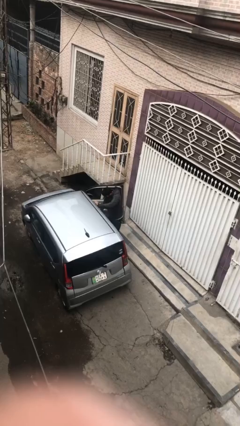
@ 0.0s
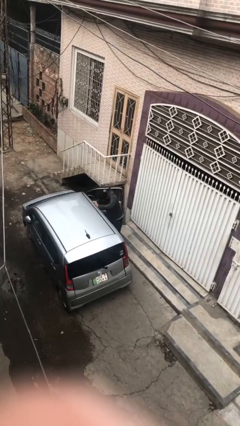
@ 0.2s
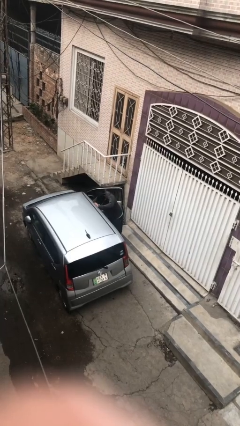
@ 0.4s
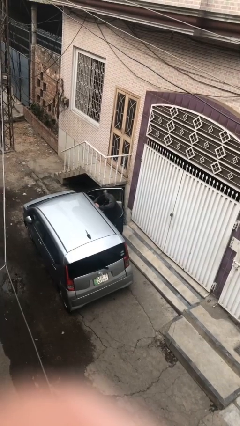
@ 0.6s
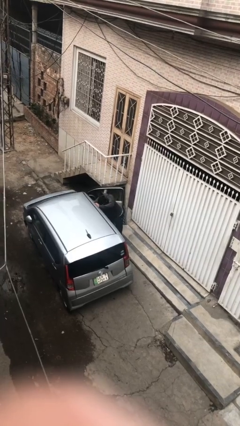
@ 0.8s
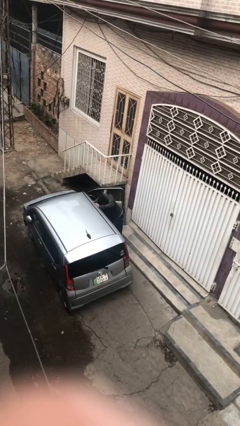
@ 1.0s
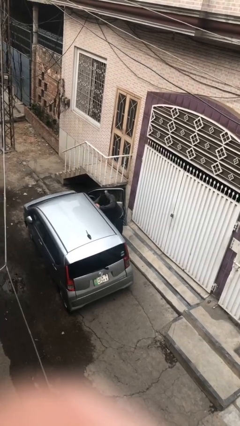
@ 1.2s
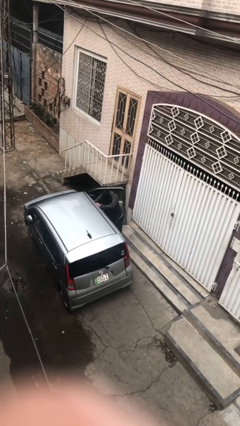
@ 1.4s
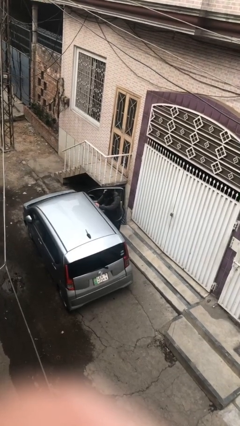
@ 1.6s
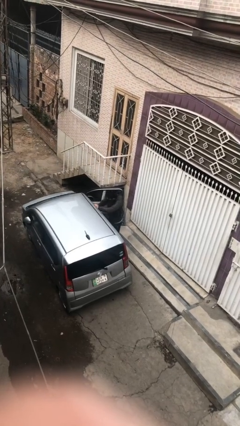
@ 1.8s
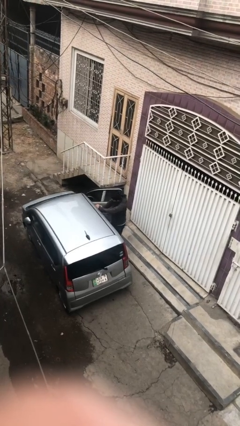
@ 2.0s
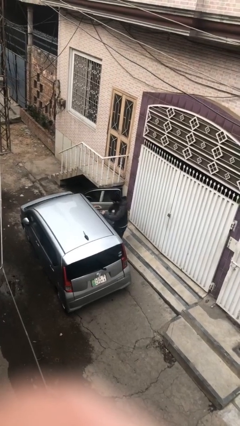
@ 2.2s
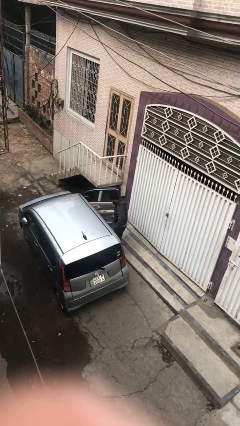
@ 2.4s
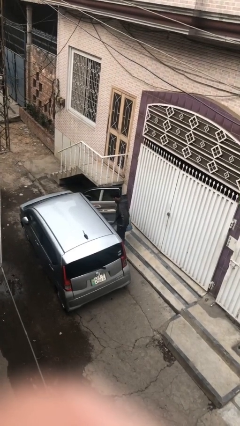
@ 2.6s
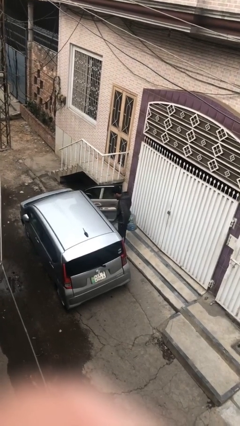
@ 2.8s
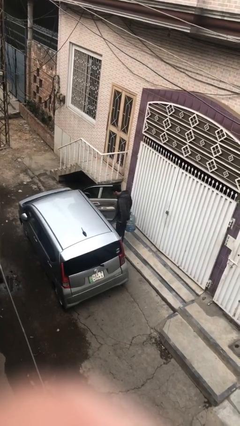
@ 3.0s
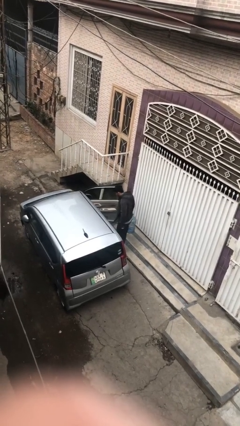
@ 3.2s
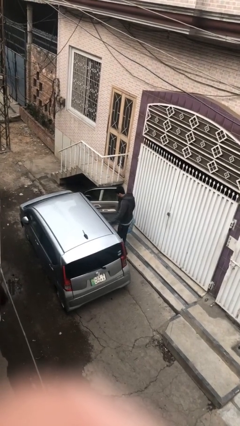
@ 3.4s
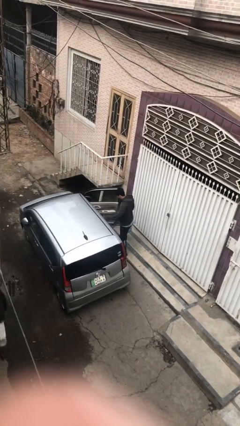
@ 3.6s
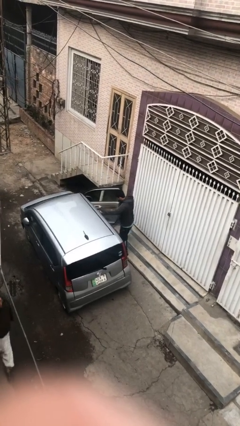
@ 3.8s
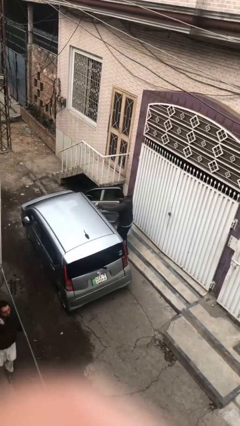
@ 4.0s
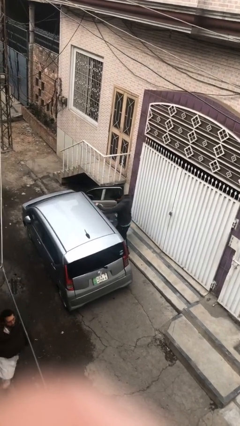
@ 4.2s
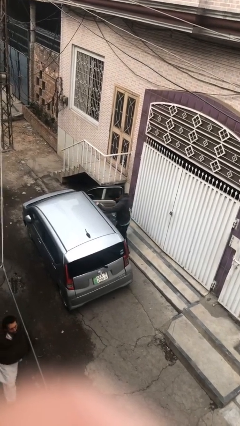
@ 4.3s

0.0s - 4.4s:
person unloads car

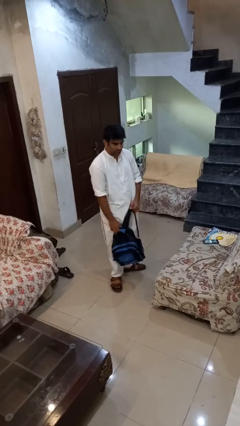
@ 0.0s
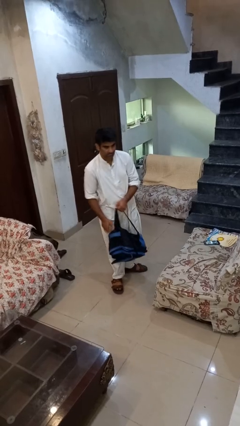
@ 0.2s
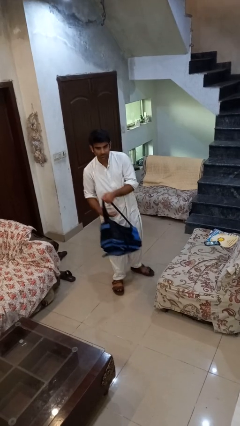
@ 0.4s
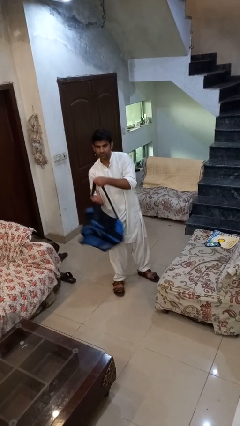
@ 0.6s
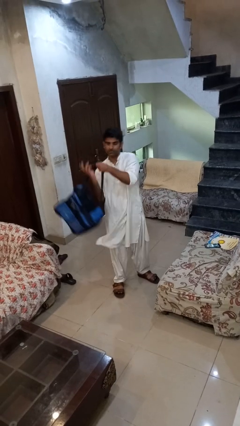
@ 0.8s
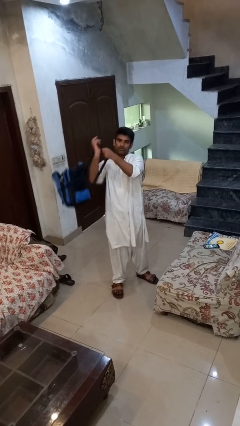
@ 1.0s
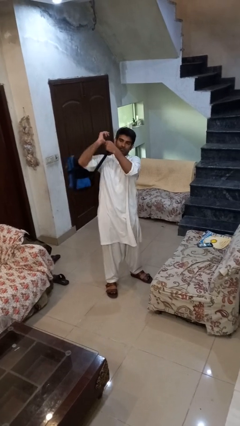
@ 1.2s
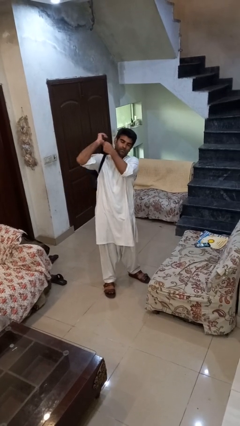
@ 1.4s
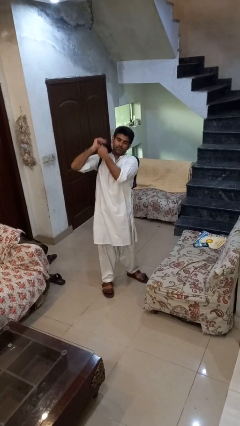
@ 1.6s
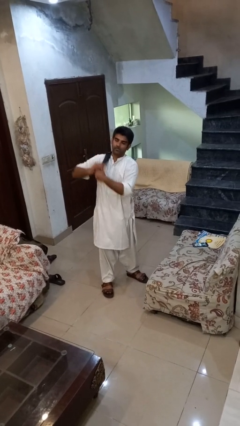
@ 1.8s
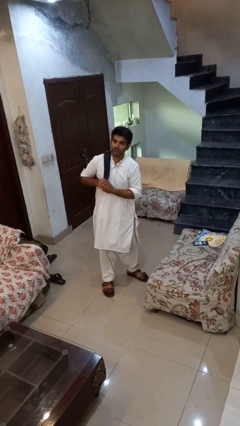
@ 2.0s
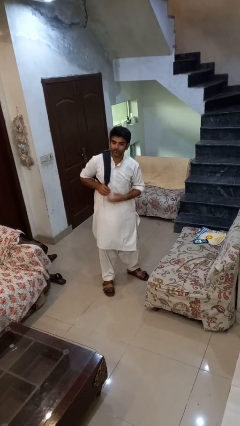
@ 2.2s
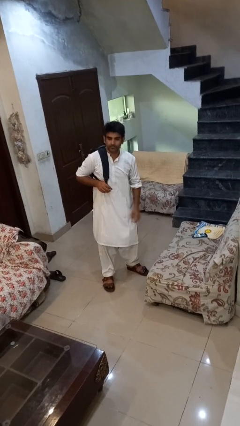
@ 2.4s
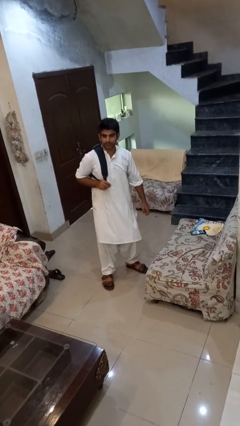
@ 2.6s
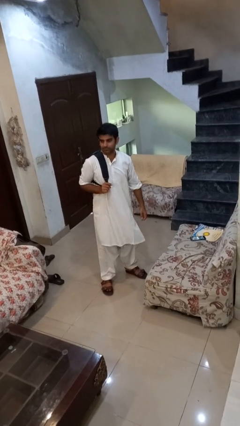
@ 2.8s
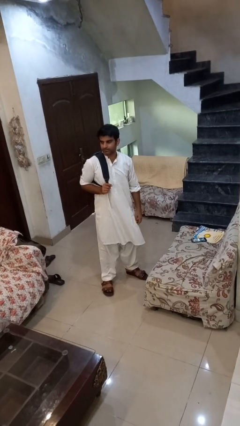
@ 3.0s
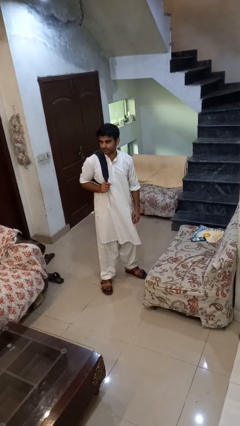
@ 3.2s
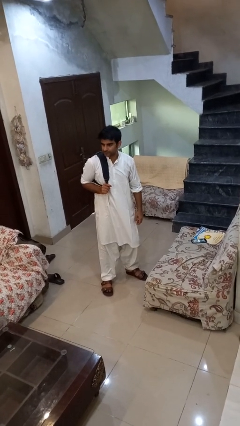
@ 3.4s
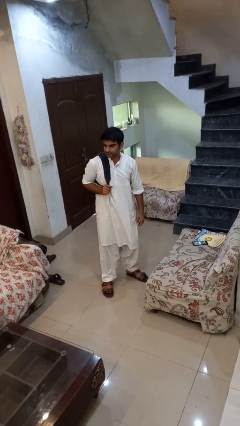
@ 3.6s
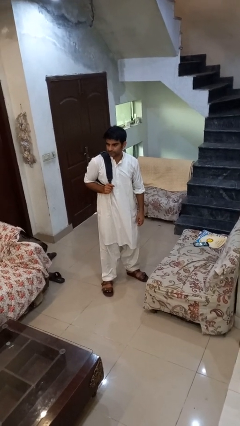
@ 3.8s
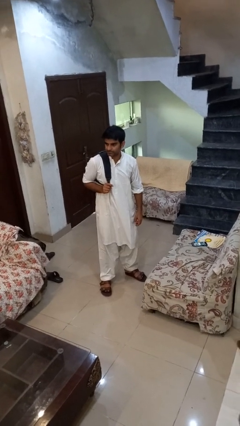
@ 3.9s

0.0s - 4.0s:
person puts on backpack

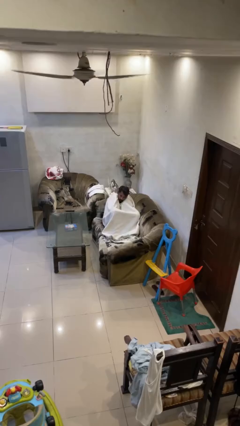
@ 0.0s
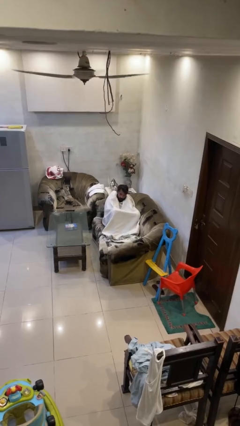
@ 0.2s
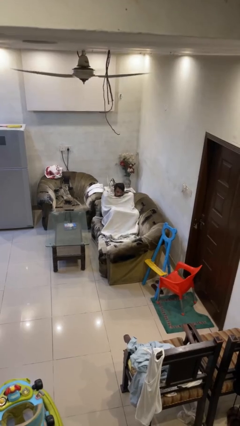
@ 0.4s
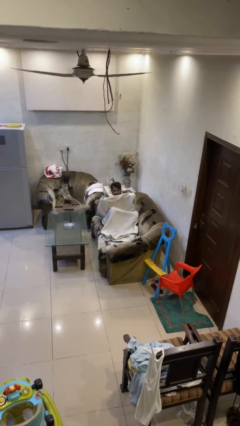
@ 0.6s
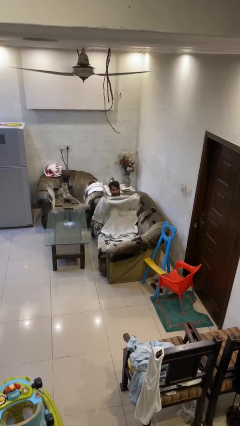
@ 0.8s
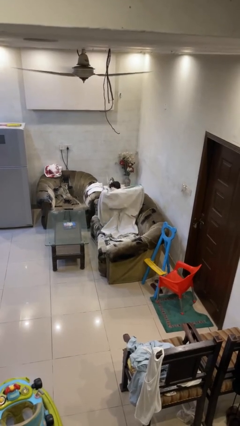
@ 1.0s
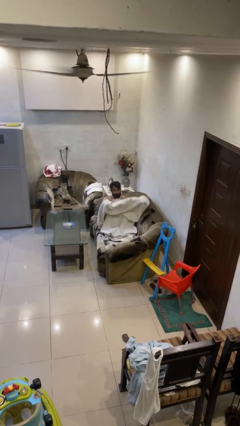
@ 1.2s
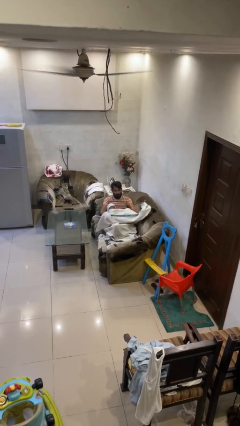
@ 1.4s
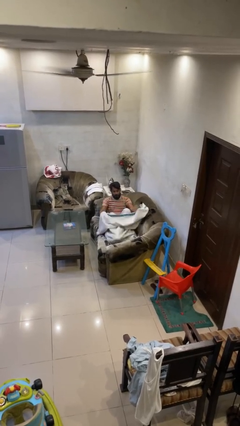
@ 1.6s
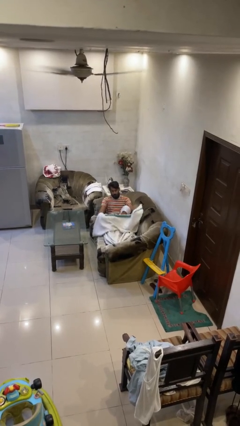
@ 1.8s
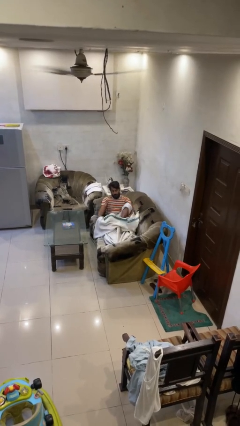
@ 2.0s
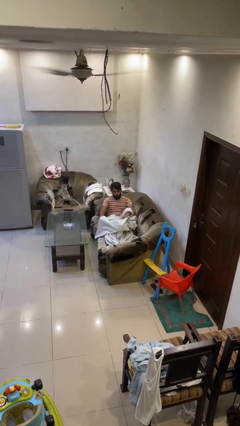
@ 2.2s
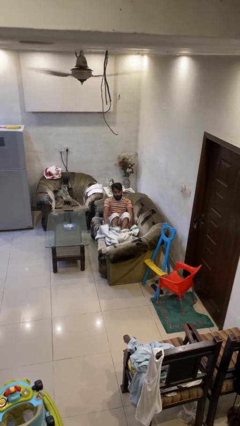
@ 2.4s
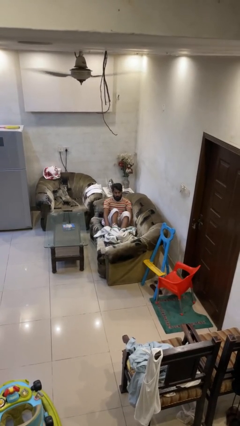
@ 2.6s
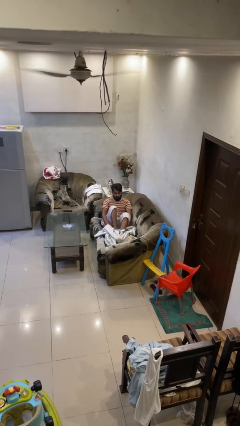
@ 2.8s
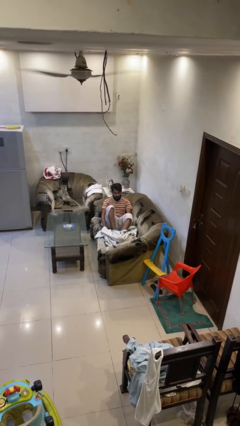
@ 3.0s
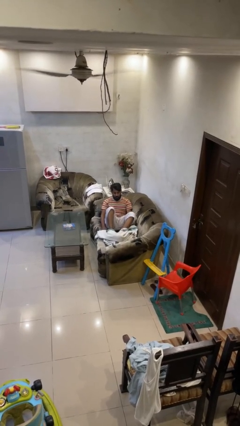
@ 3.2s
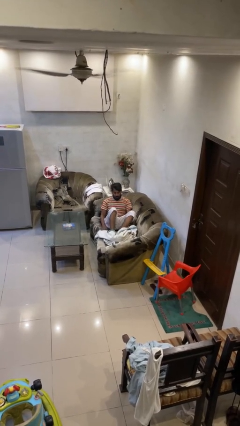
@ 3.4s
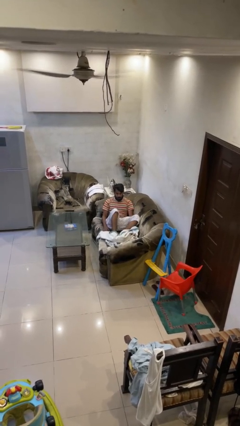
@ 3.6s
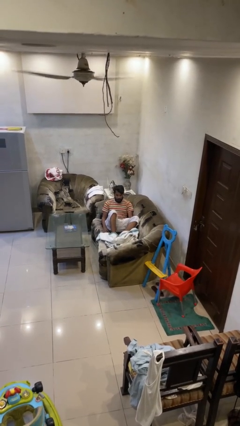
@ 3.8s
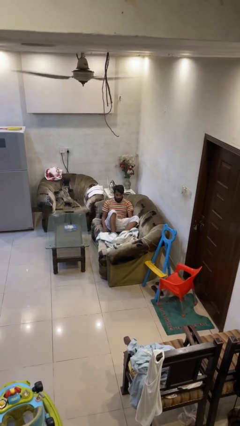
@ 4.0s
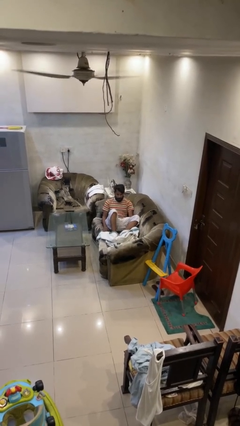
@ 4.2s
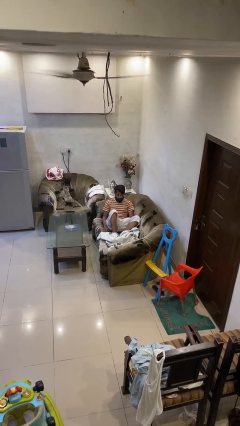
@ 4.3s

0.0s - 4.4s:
person uncovers with blanket

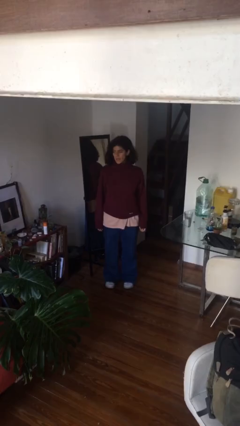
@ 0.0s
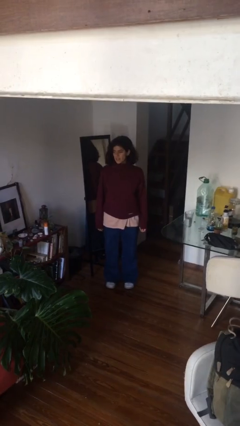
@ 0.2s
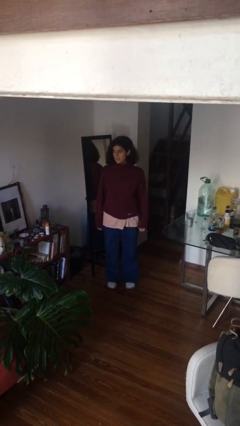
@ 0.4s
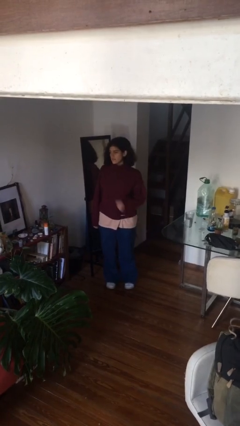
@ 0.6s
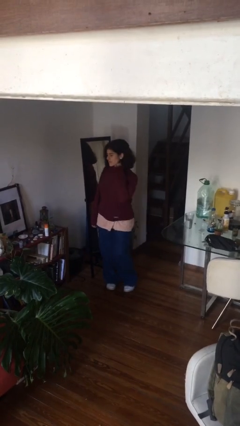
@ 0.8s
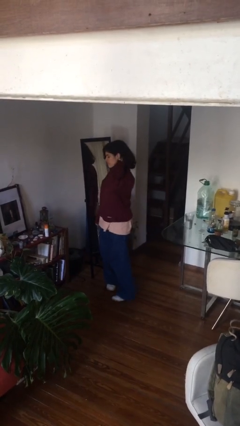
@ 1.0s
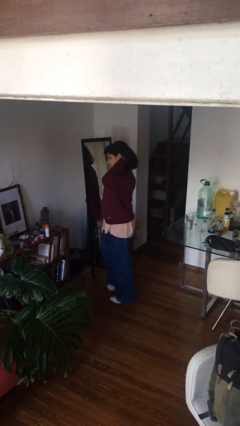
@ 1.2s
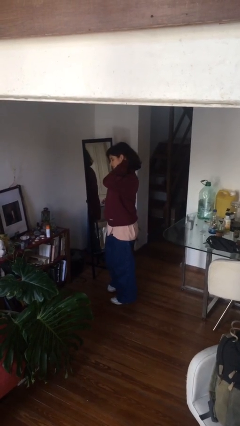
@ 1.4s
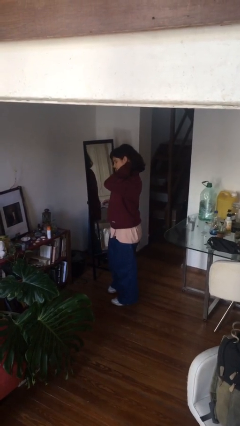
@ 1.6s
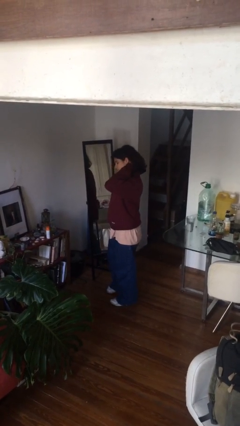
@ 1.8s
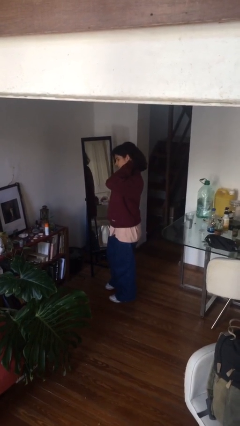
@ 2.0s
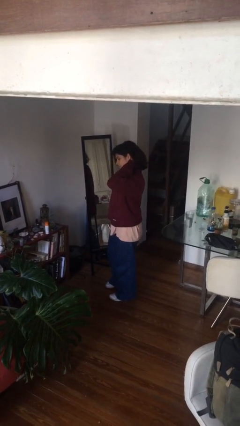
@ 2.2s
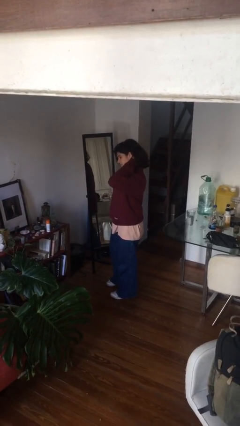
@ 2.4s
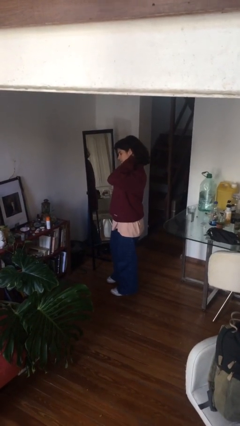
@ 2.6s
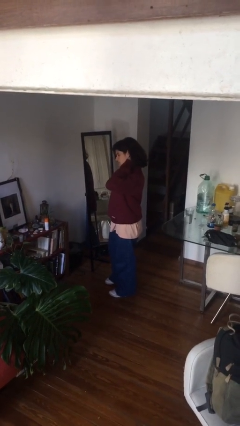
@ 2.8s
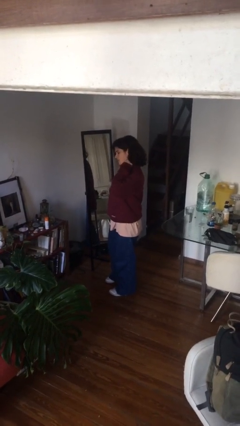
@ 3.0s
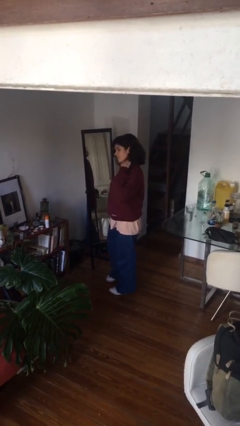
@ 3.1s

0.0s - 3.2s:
person scratches face

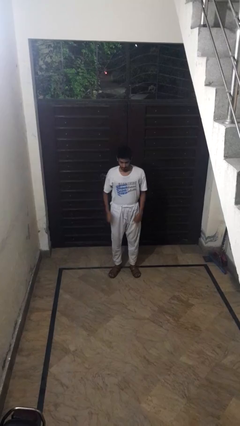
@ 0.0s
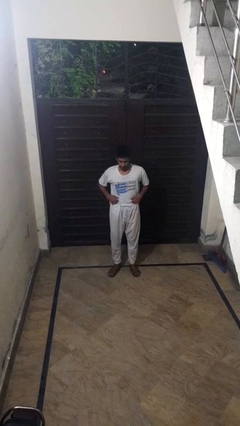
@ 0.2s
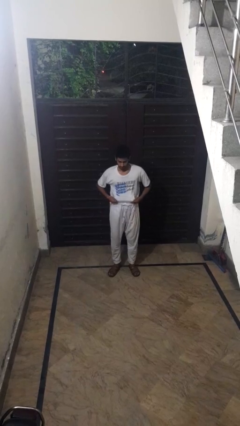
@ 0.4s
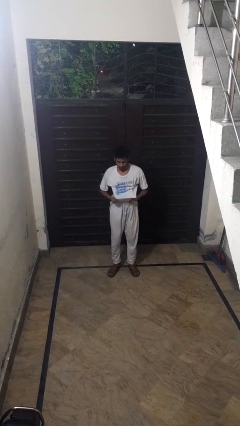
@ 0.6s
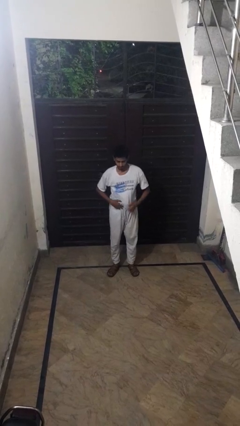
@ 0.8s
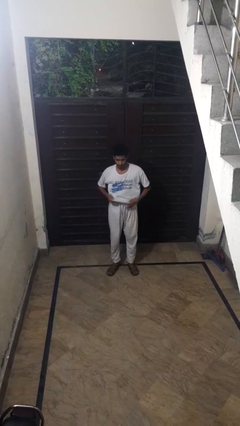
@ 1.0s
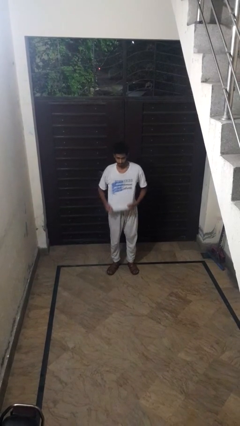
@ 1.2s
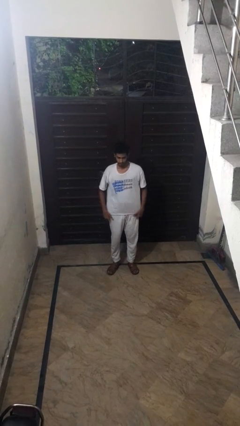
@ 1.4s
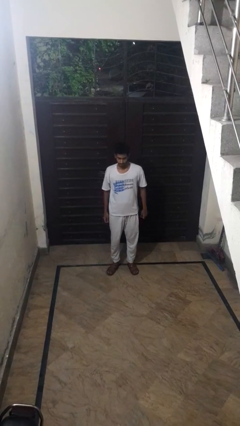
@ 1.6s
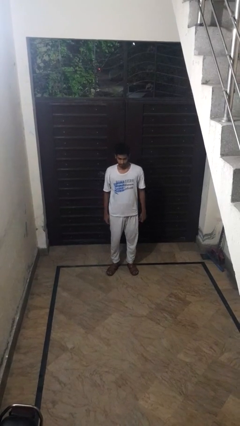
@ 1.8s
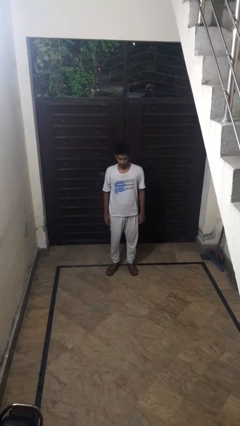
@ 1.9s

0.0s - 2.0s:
person untucks shirt
